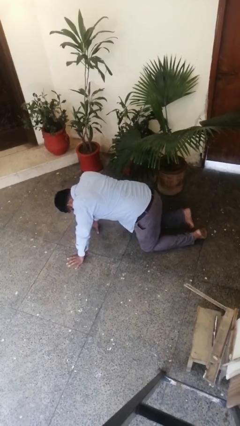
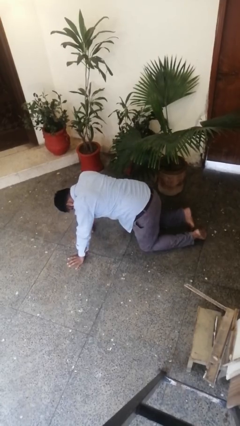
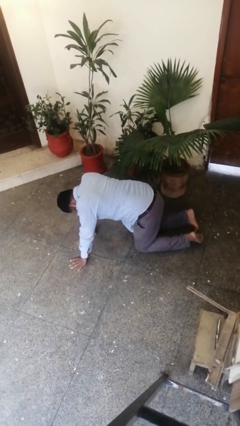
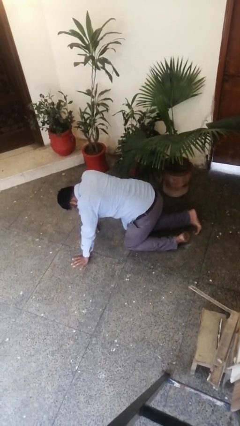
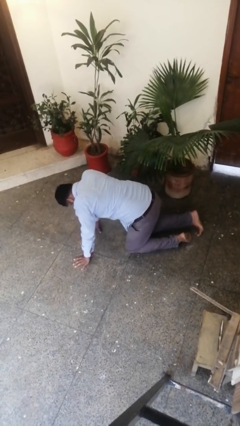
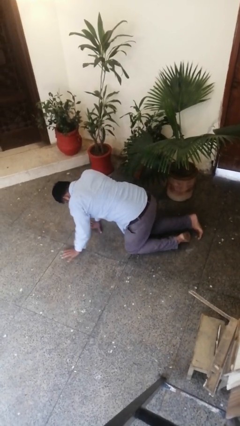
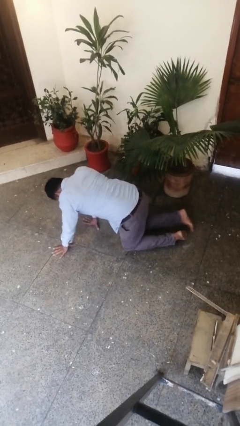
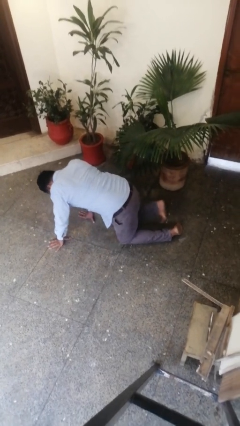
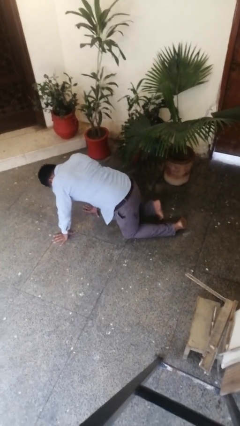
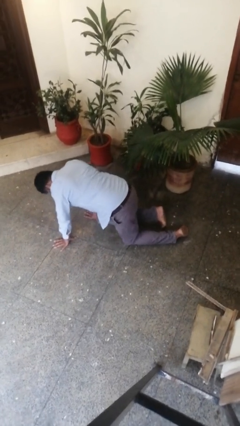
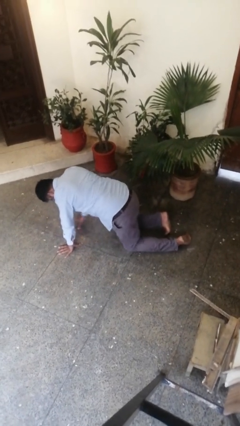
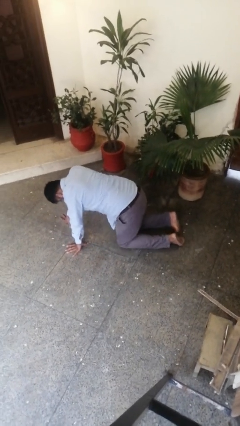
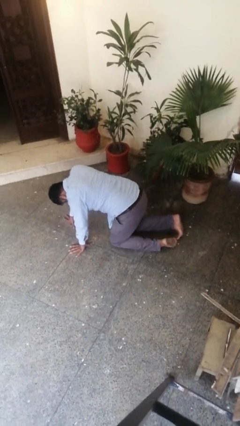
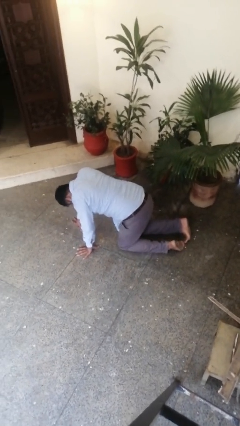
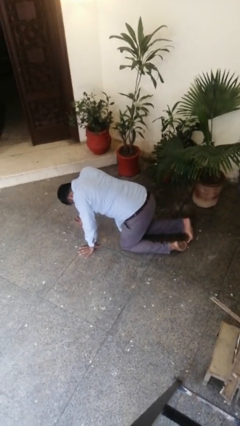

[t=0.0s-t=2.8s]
person crawls

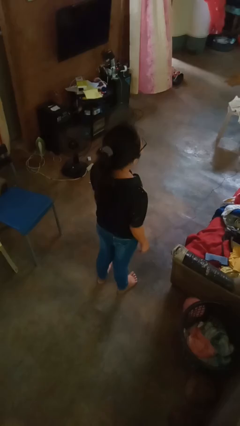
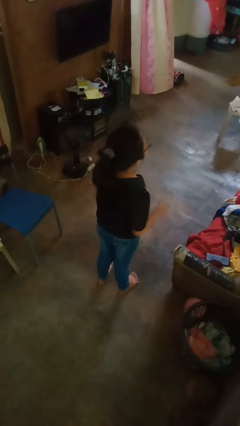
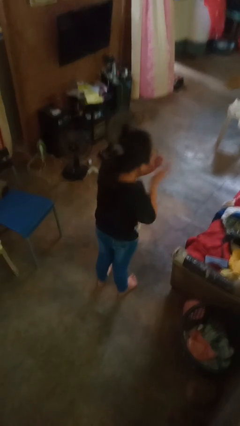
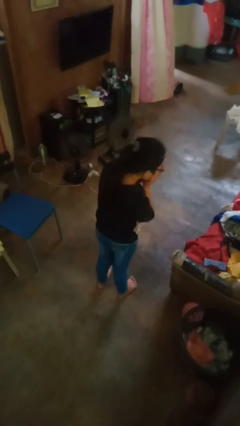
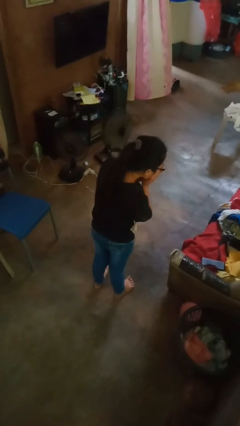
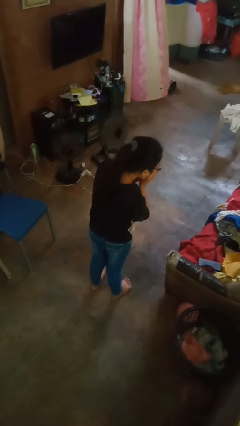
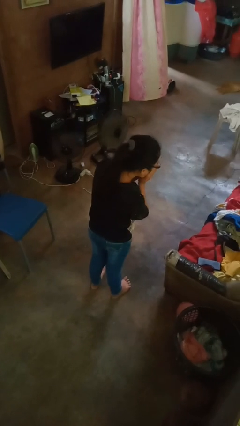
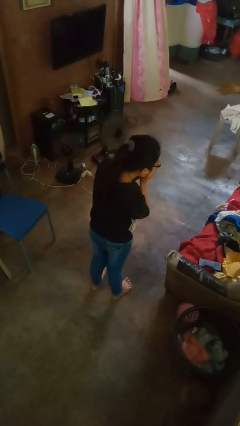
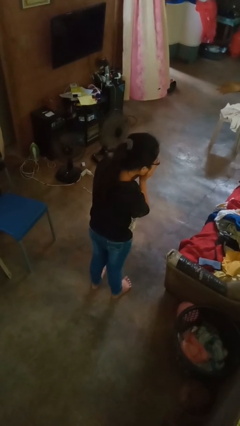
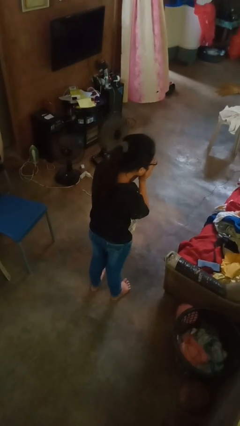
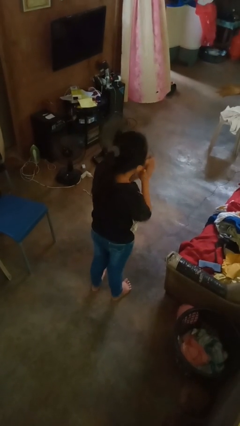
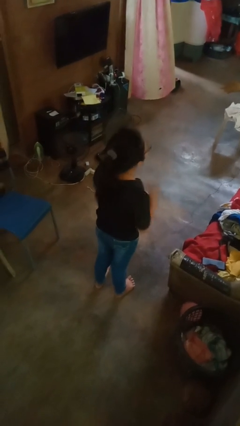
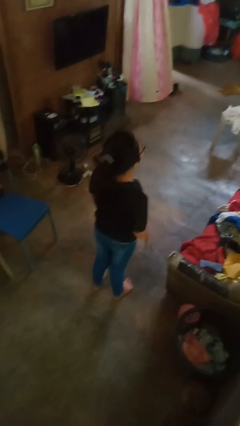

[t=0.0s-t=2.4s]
person sneezes into hand

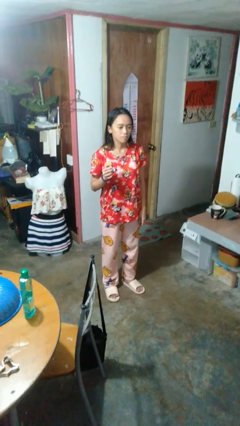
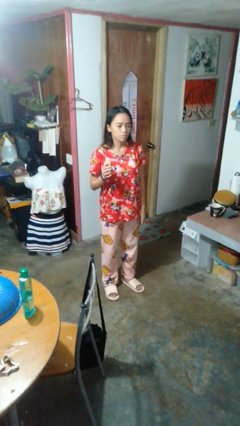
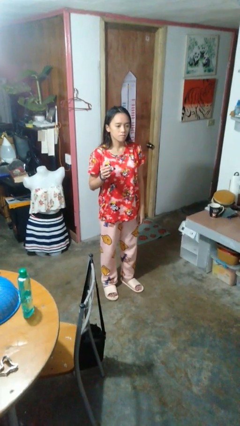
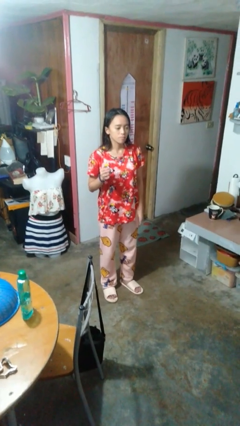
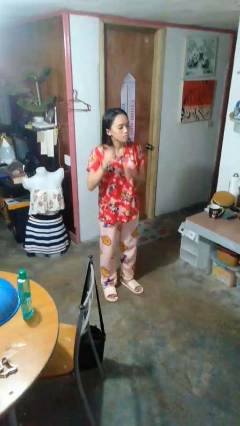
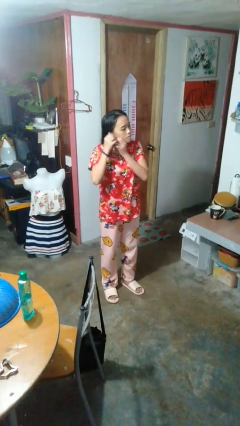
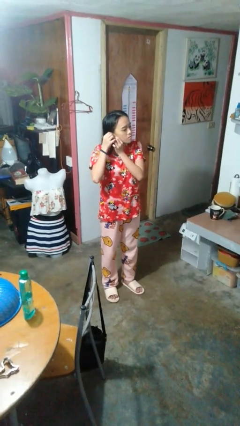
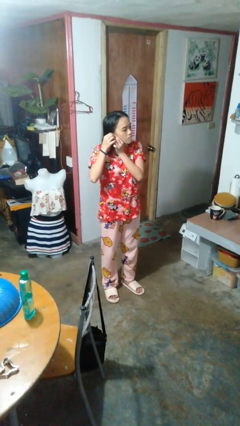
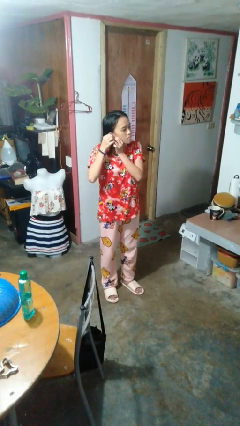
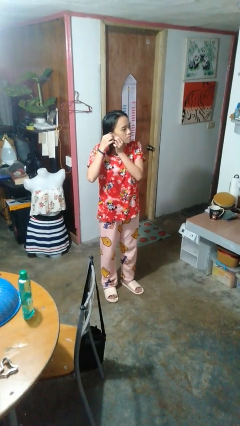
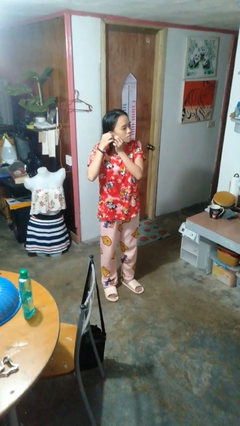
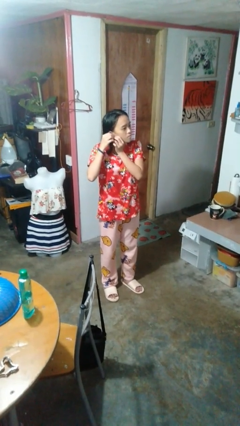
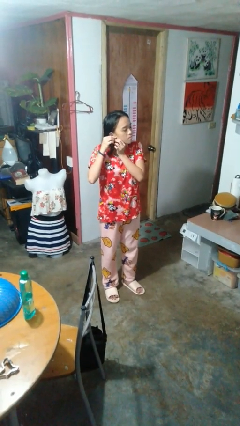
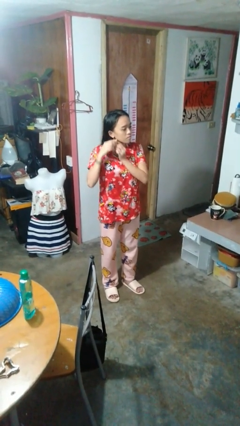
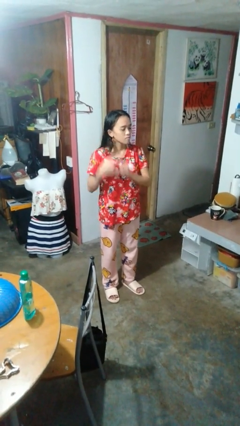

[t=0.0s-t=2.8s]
person puts on earrings

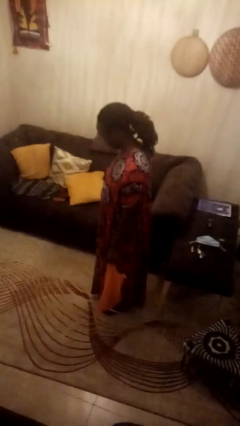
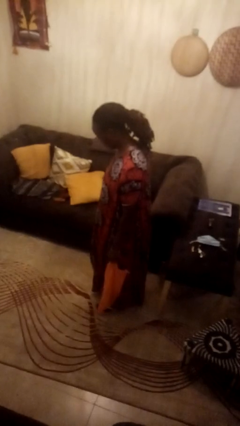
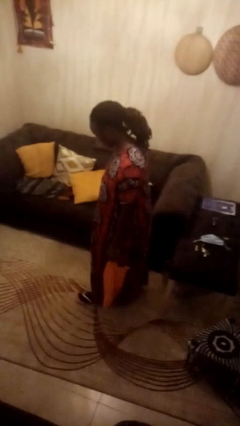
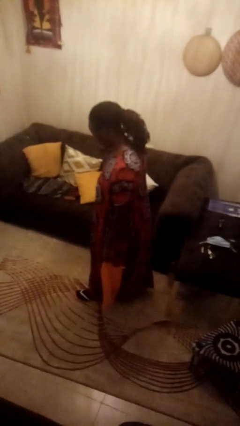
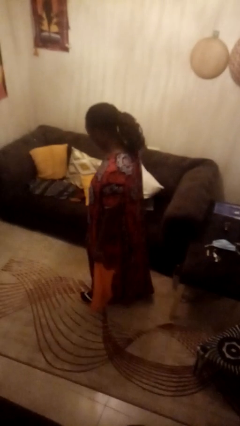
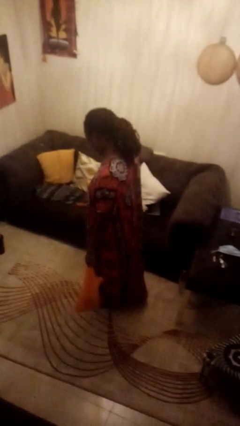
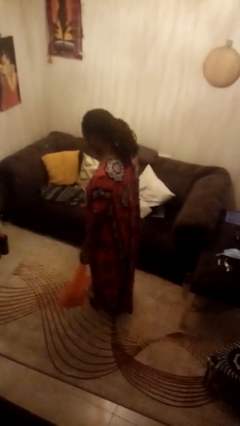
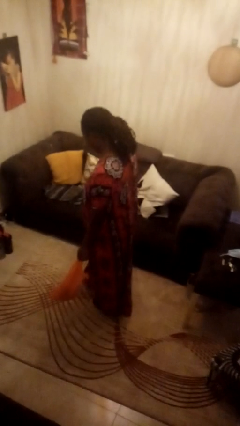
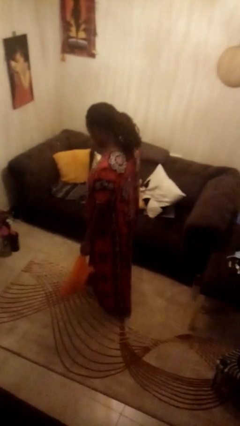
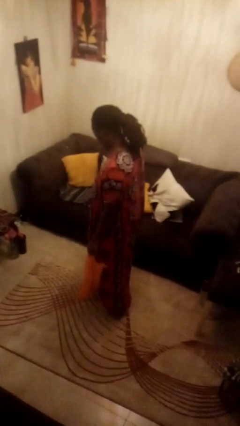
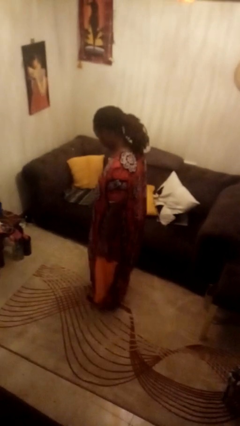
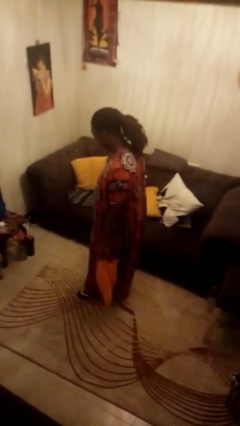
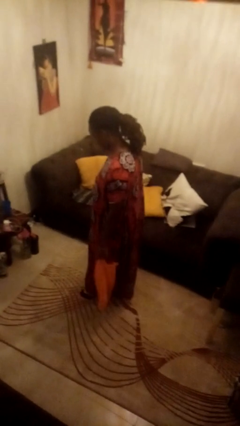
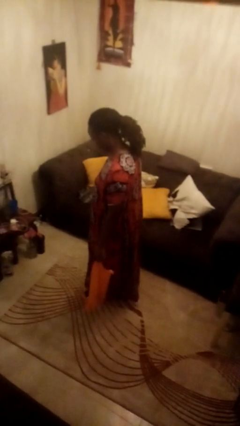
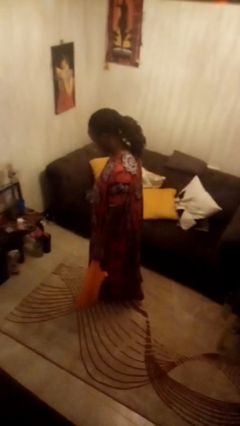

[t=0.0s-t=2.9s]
person carries groceries

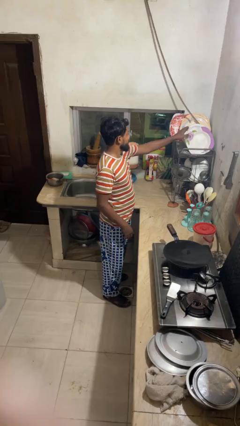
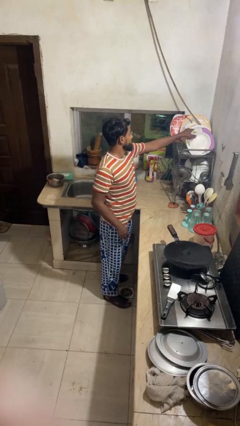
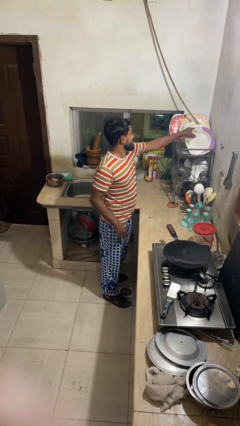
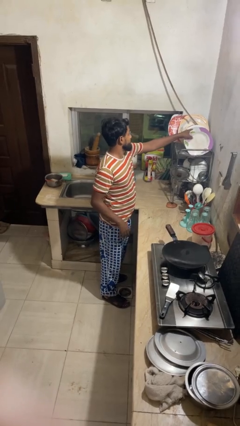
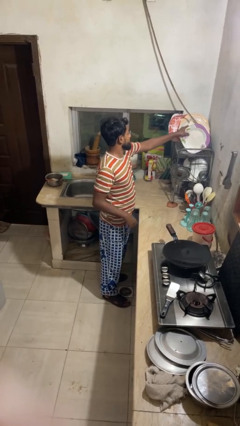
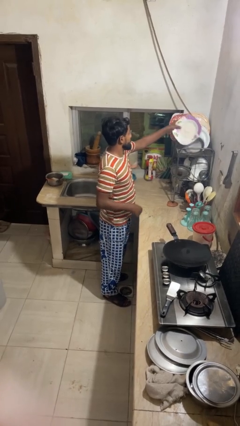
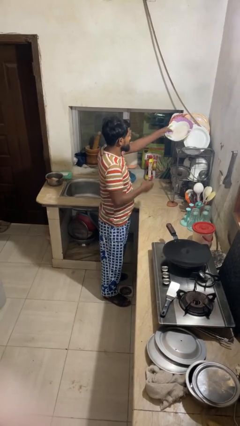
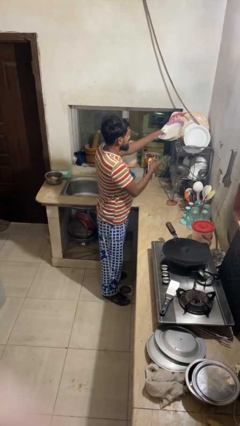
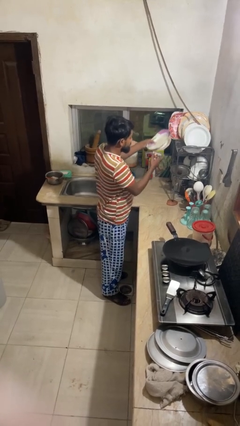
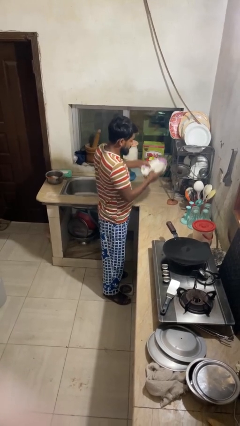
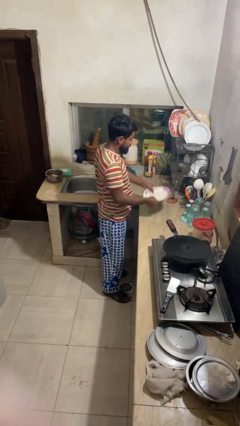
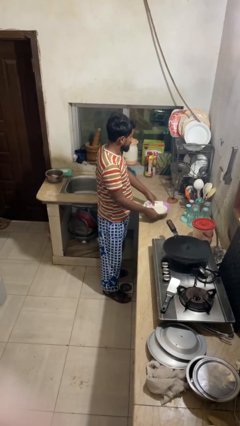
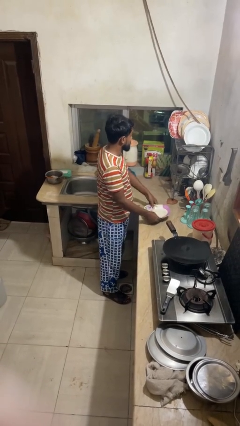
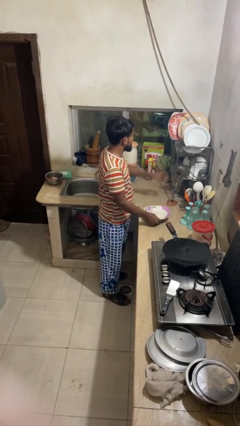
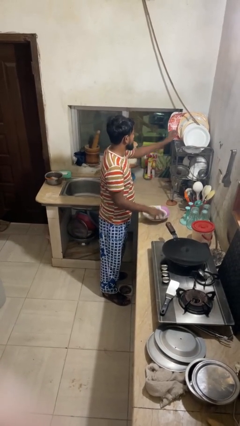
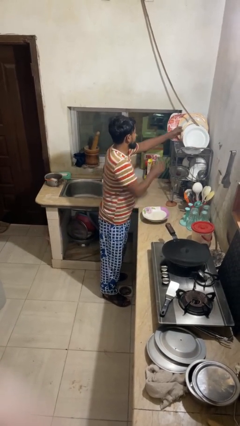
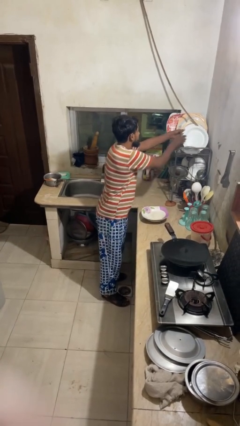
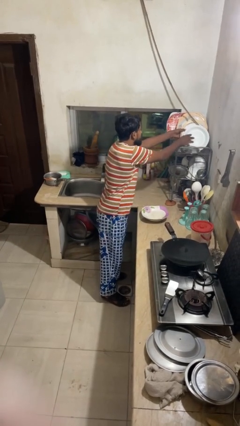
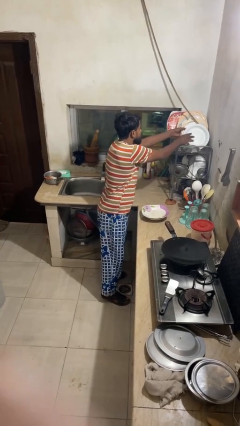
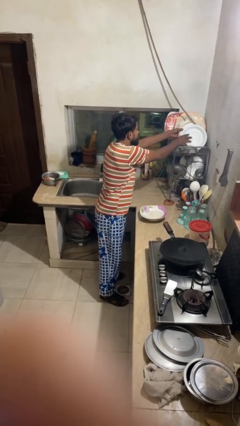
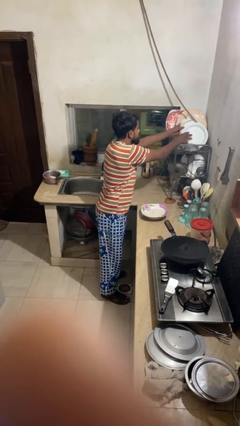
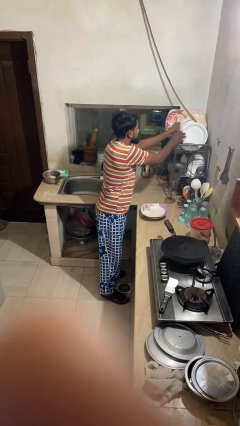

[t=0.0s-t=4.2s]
person unloads dishwasher

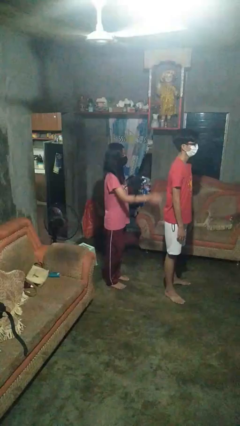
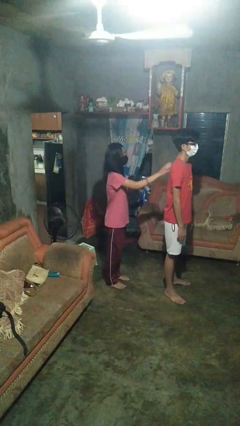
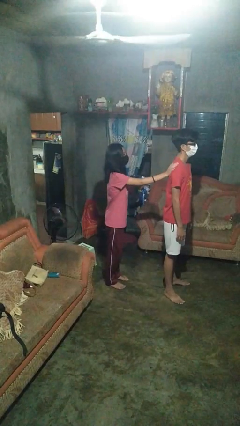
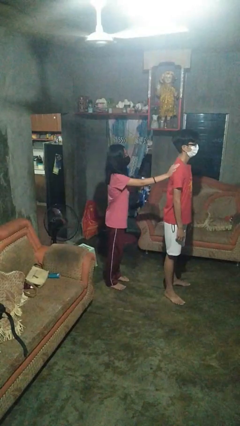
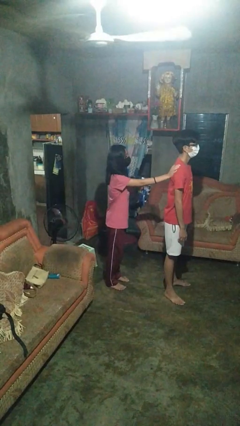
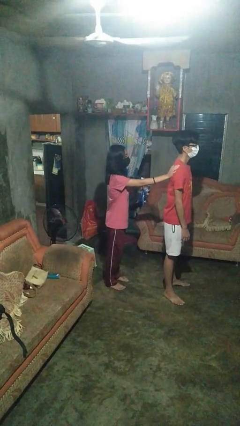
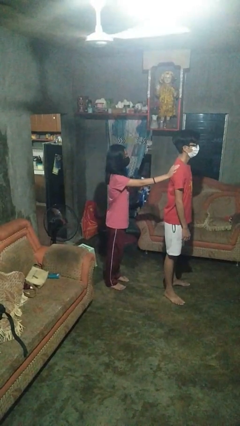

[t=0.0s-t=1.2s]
person touches back of person

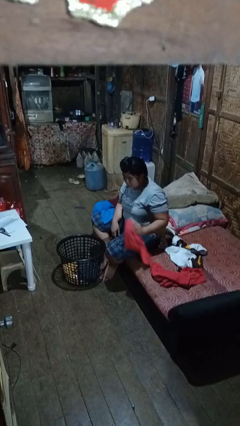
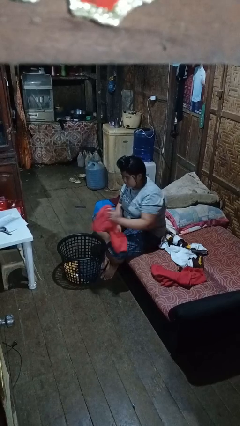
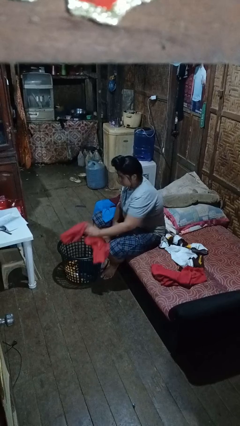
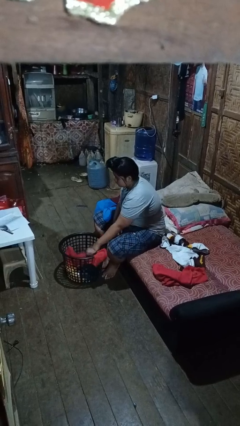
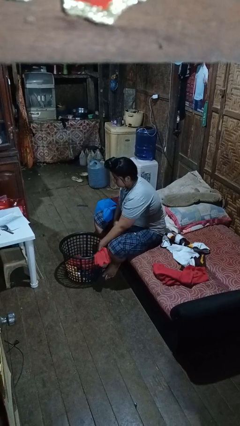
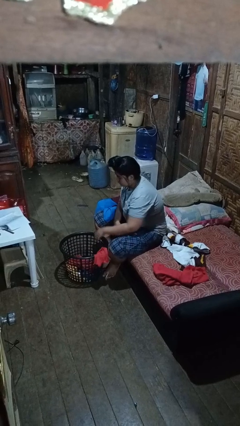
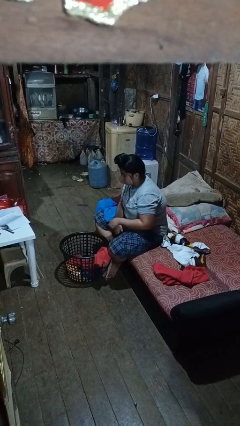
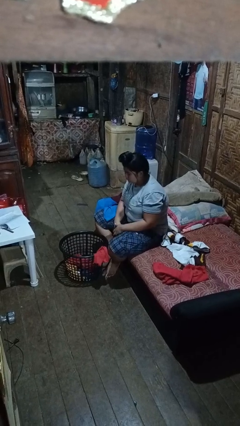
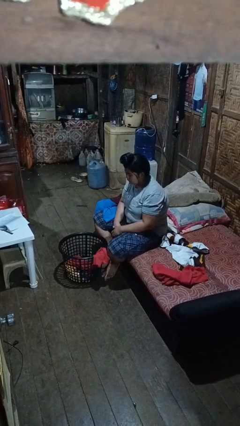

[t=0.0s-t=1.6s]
person puts object into basket
